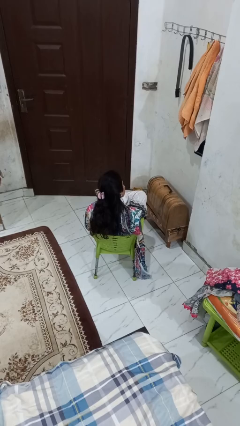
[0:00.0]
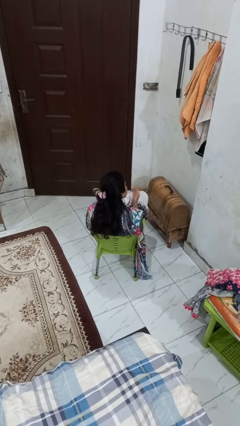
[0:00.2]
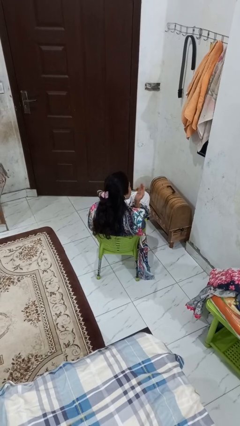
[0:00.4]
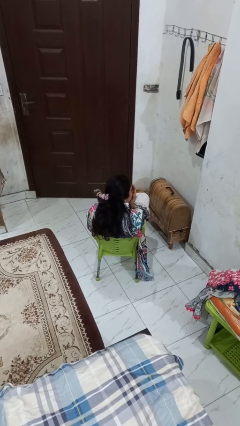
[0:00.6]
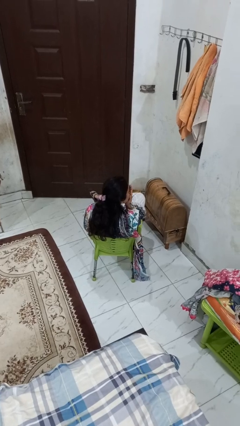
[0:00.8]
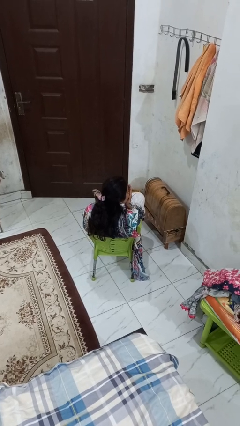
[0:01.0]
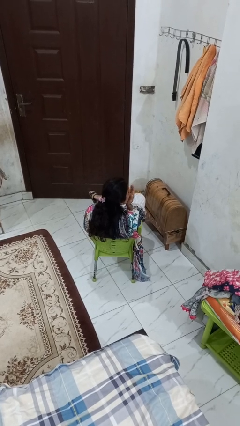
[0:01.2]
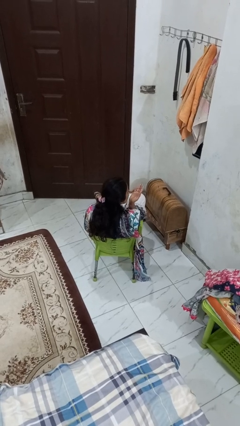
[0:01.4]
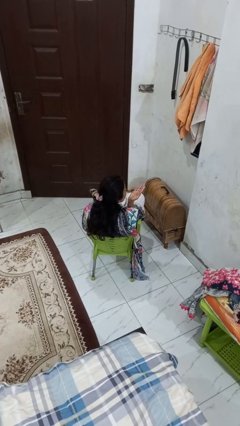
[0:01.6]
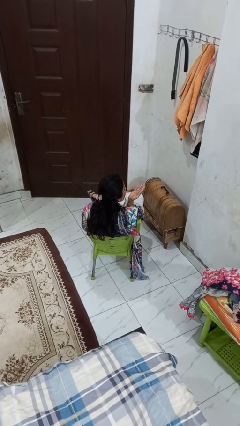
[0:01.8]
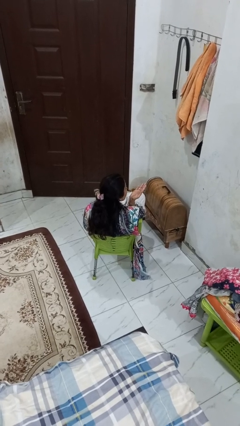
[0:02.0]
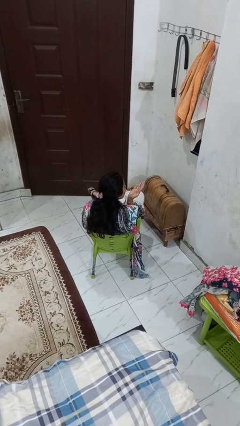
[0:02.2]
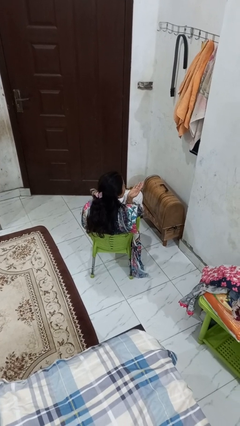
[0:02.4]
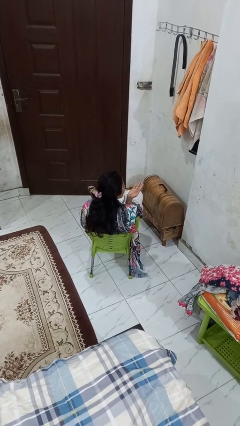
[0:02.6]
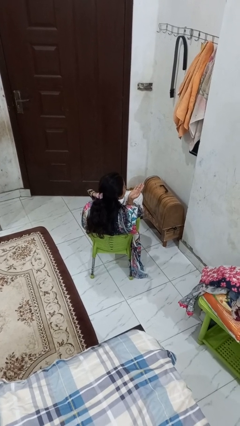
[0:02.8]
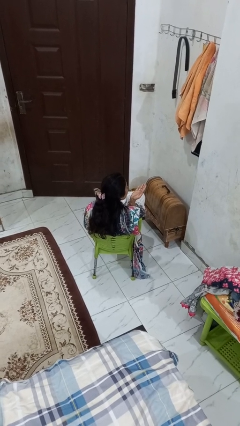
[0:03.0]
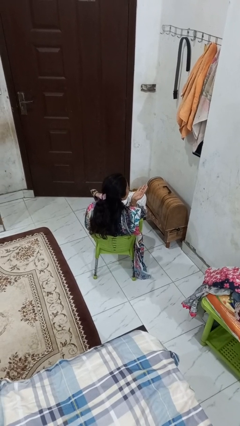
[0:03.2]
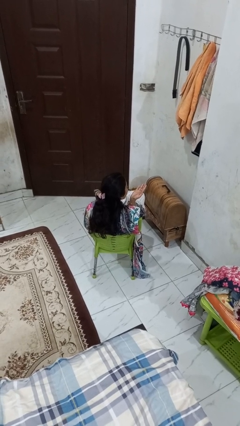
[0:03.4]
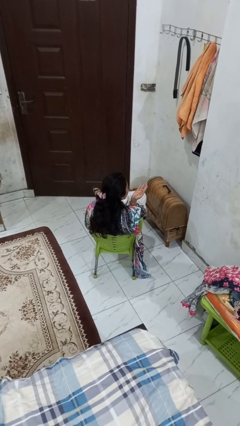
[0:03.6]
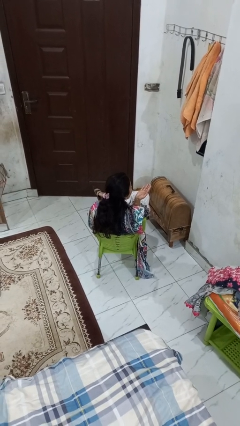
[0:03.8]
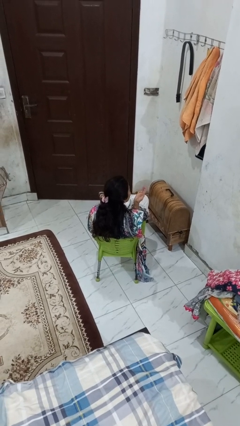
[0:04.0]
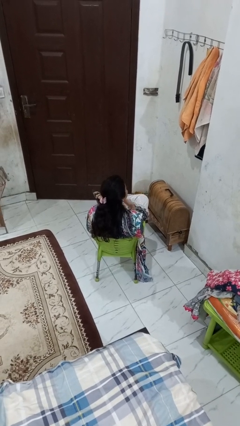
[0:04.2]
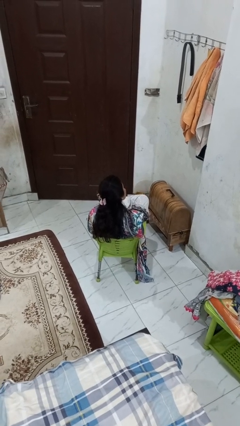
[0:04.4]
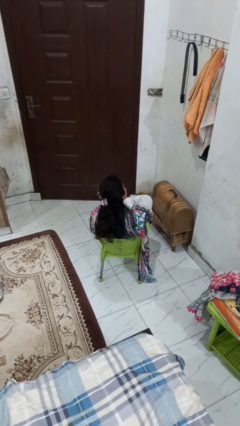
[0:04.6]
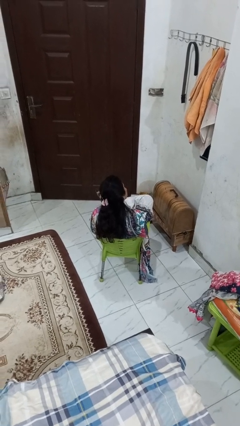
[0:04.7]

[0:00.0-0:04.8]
person gestures blow kiss

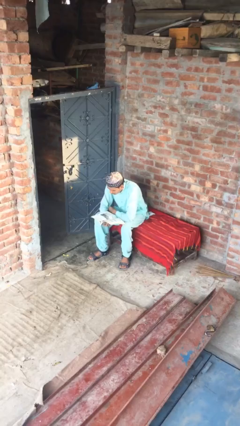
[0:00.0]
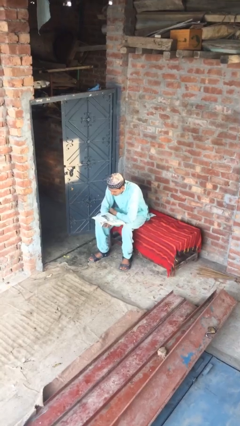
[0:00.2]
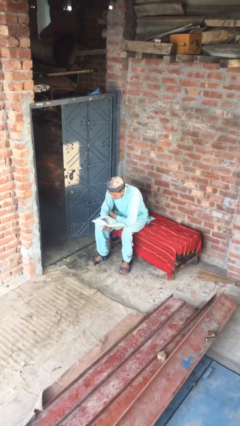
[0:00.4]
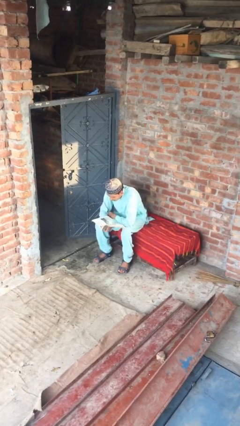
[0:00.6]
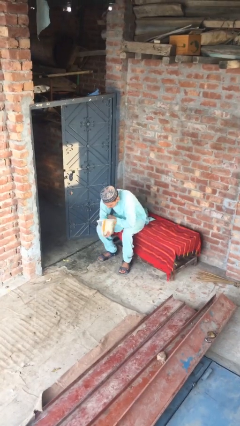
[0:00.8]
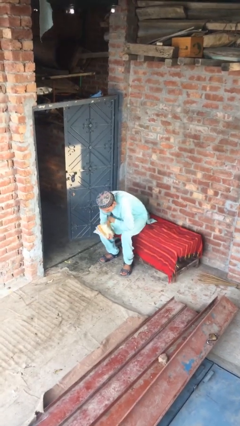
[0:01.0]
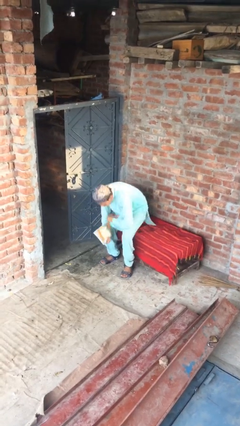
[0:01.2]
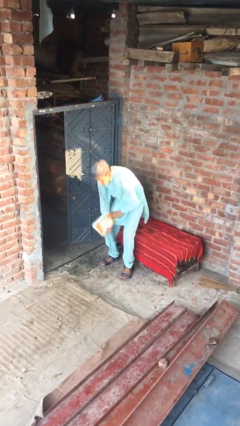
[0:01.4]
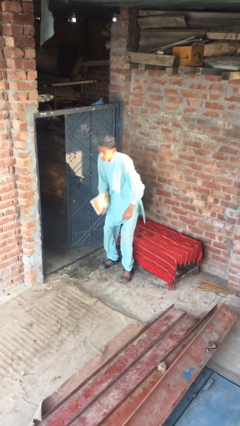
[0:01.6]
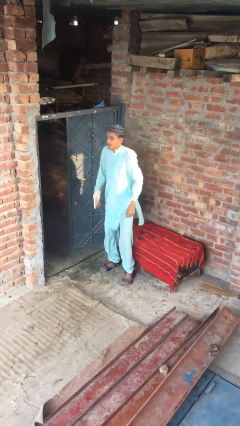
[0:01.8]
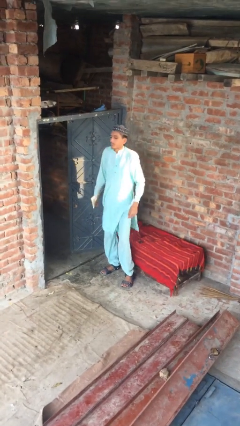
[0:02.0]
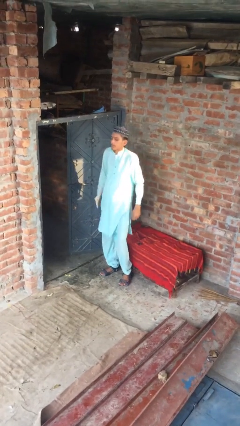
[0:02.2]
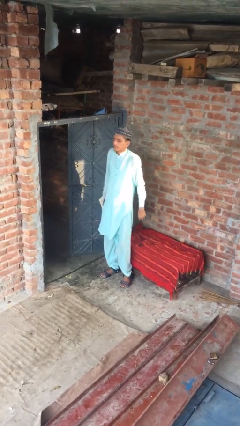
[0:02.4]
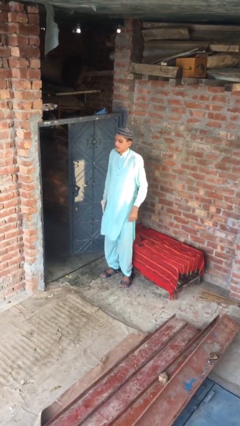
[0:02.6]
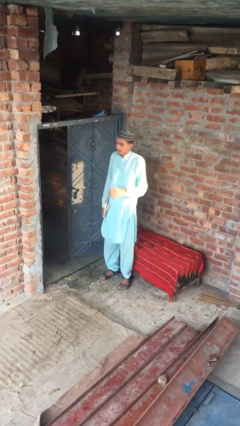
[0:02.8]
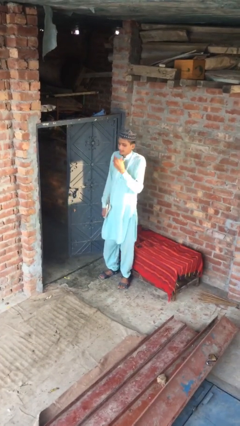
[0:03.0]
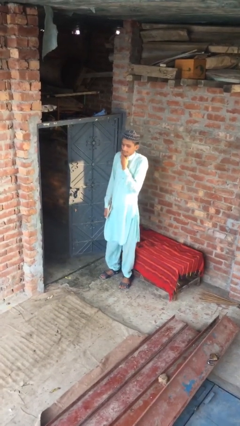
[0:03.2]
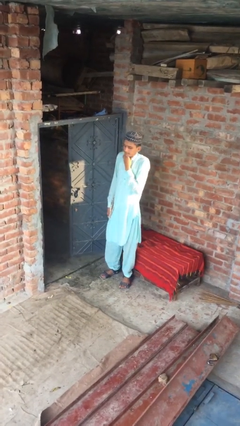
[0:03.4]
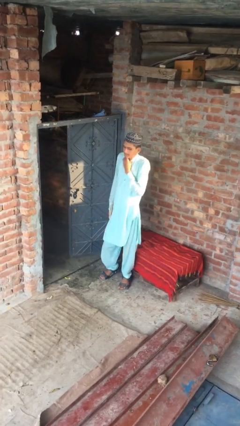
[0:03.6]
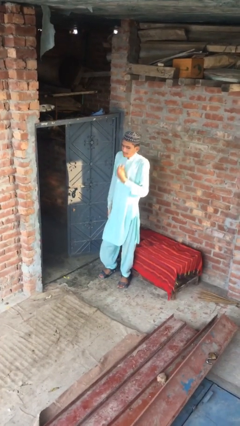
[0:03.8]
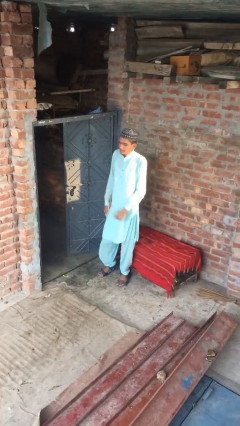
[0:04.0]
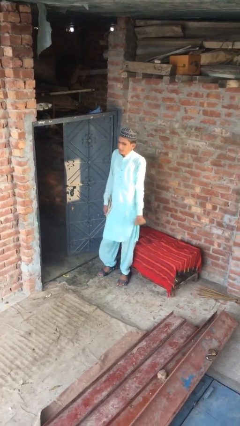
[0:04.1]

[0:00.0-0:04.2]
person stands up

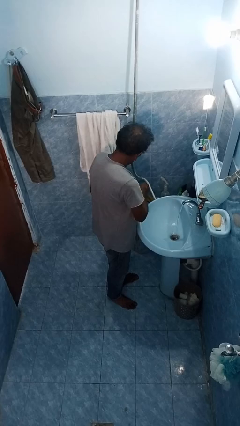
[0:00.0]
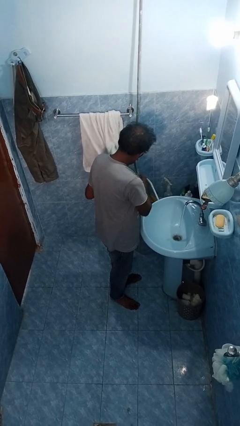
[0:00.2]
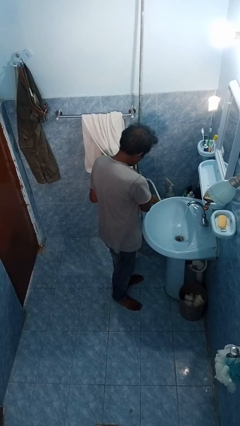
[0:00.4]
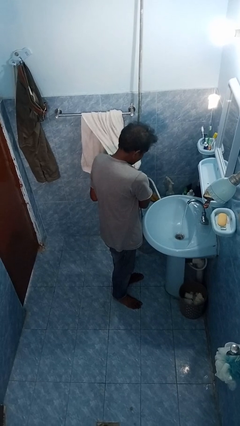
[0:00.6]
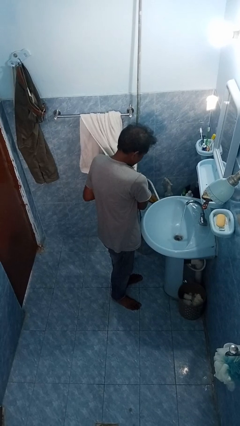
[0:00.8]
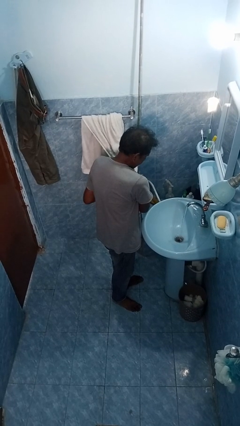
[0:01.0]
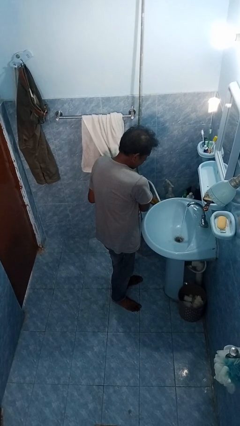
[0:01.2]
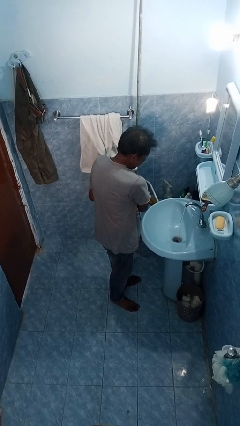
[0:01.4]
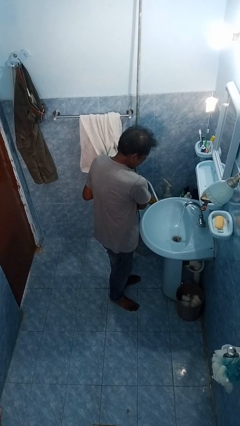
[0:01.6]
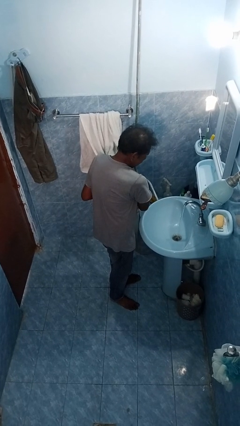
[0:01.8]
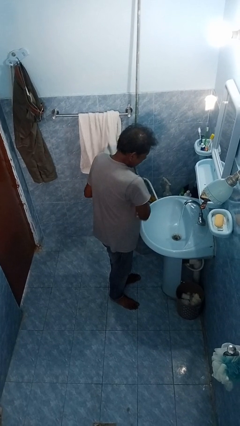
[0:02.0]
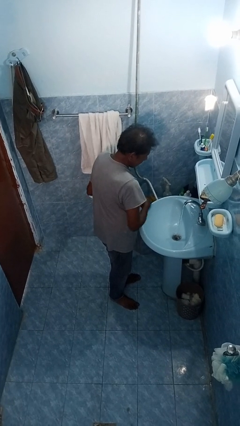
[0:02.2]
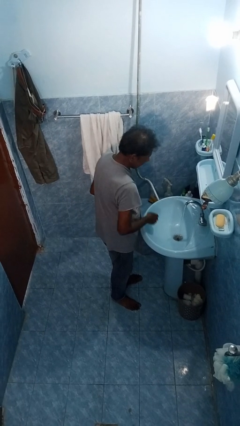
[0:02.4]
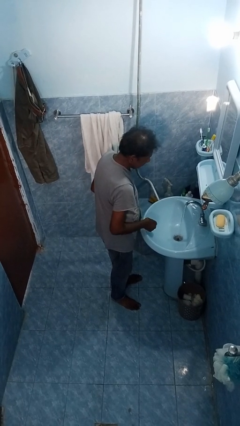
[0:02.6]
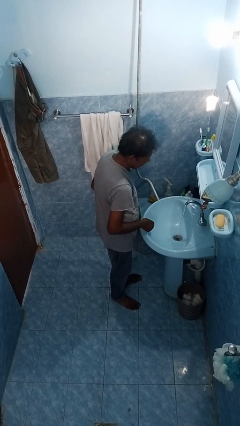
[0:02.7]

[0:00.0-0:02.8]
person dries hands with towel

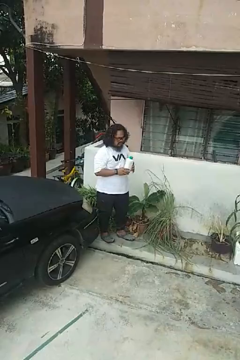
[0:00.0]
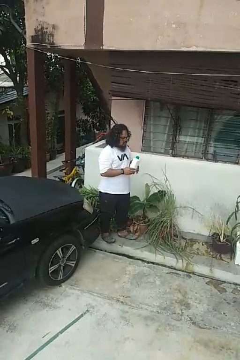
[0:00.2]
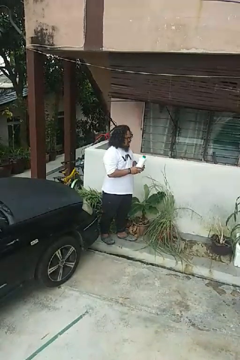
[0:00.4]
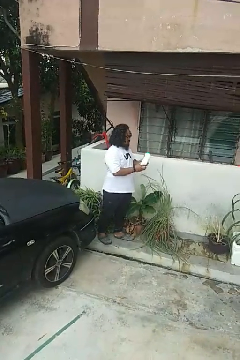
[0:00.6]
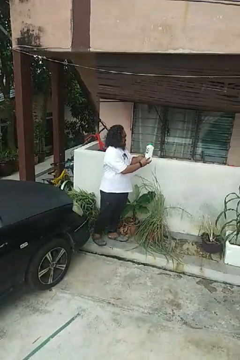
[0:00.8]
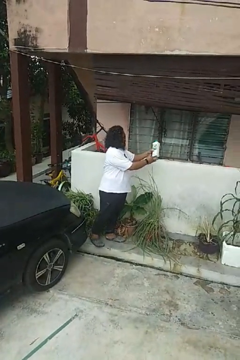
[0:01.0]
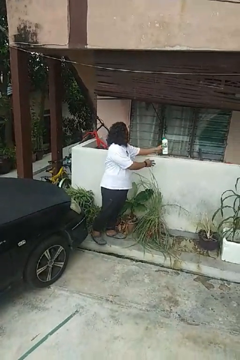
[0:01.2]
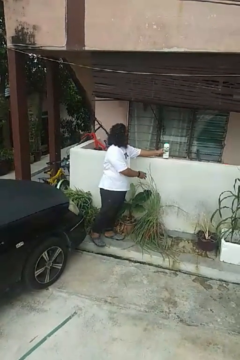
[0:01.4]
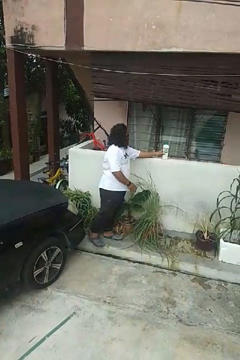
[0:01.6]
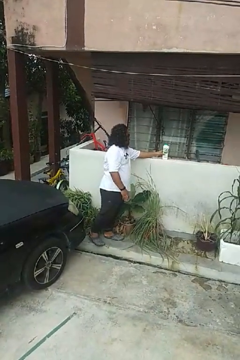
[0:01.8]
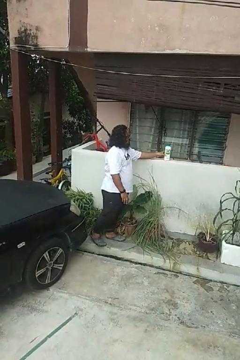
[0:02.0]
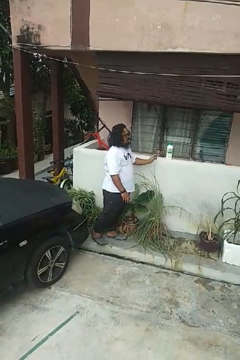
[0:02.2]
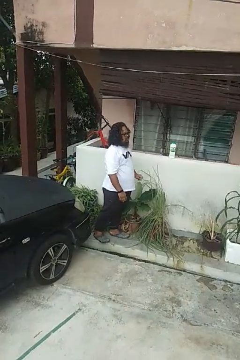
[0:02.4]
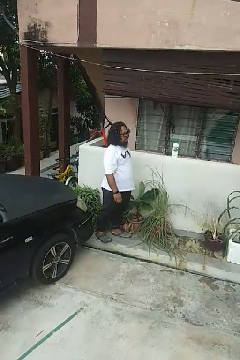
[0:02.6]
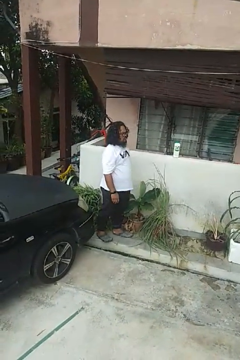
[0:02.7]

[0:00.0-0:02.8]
person puts down object on countertop

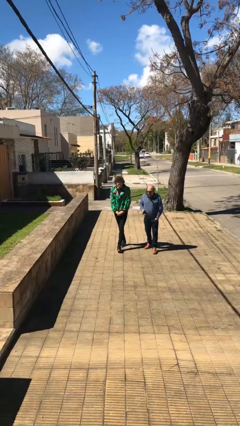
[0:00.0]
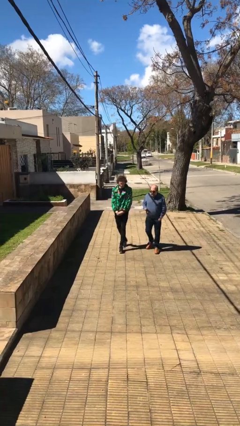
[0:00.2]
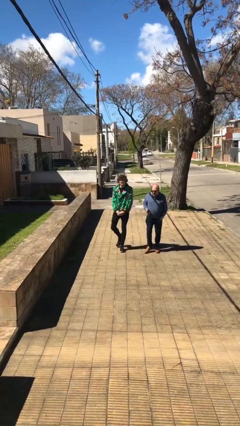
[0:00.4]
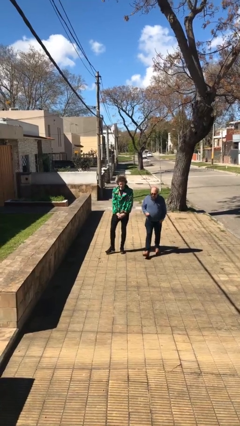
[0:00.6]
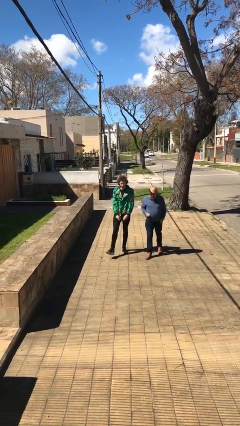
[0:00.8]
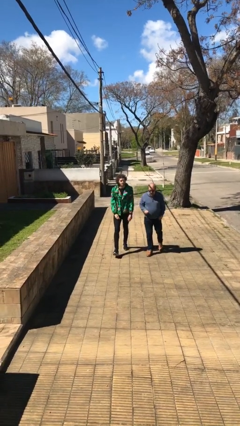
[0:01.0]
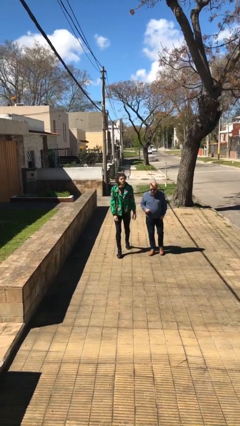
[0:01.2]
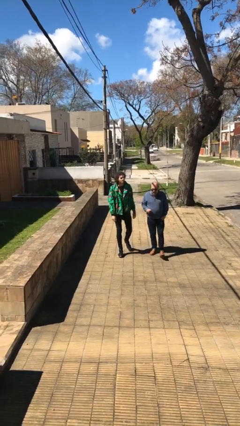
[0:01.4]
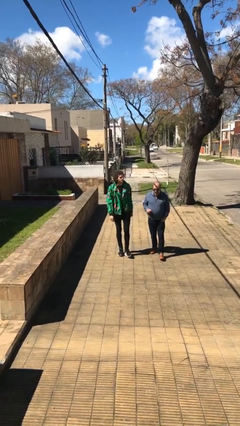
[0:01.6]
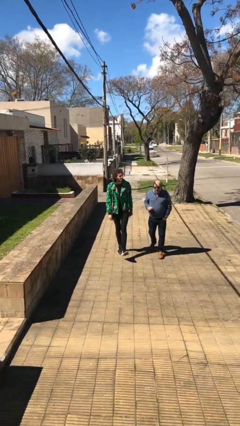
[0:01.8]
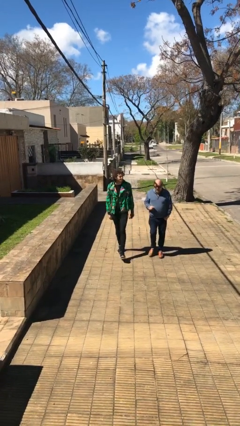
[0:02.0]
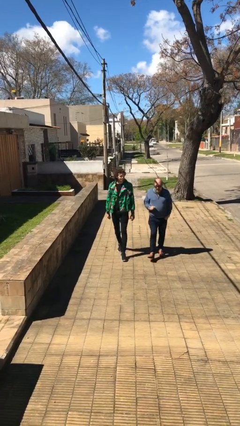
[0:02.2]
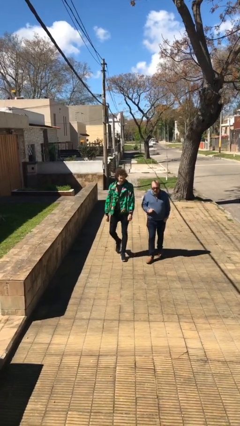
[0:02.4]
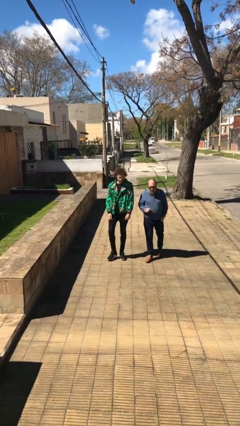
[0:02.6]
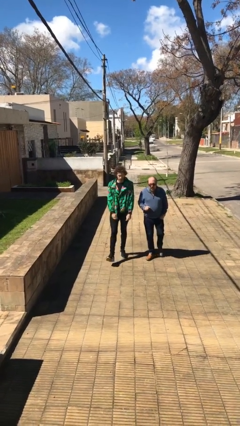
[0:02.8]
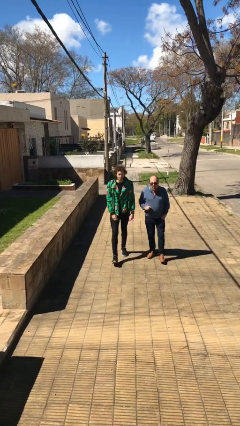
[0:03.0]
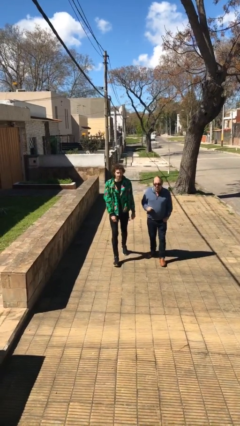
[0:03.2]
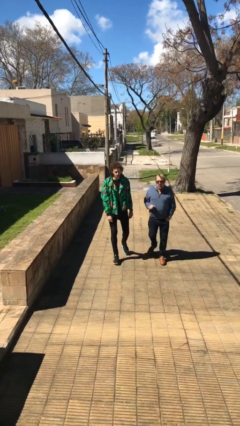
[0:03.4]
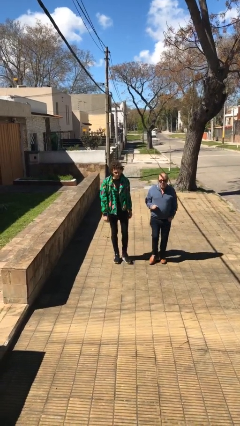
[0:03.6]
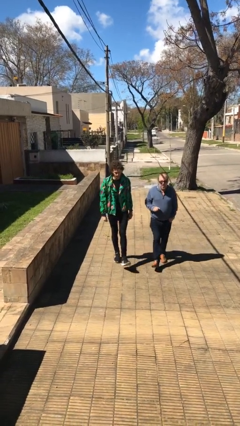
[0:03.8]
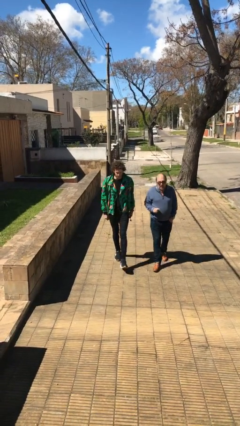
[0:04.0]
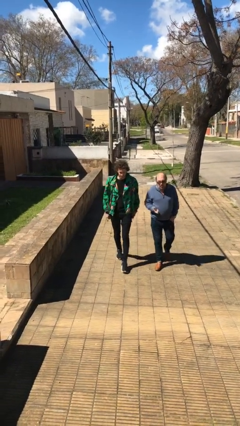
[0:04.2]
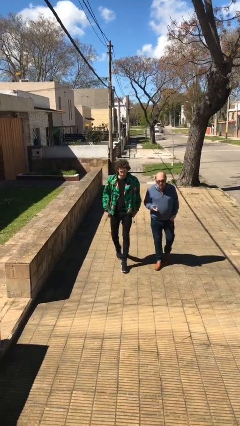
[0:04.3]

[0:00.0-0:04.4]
person talks to person
